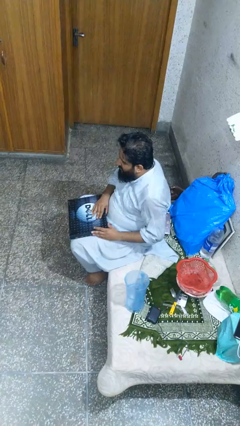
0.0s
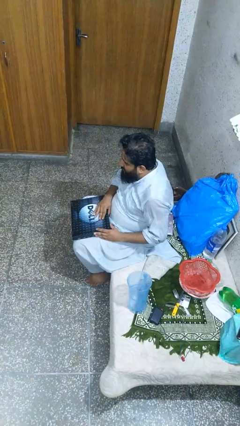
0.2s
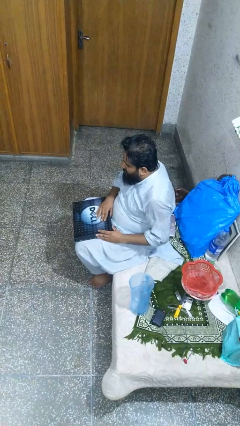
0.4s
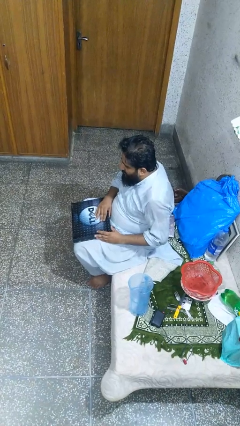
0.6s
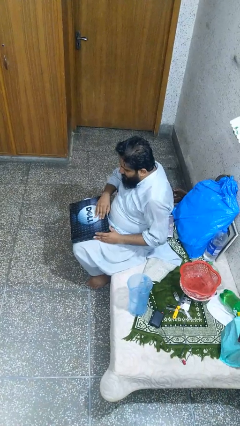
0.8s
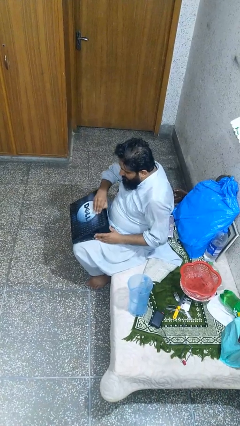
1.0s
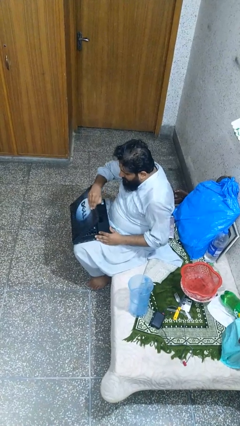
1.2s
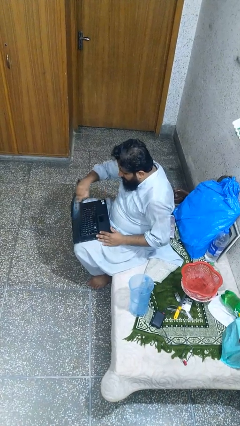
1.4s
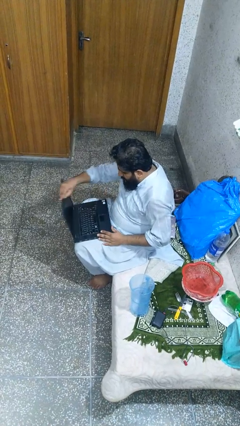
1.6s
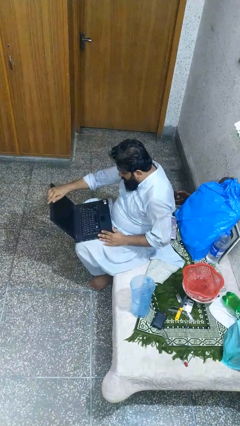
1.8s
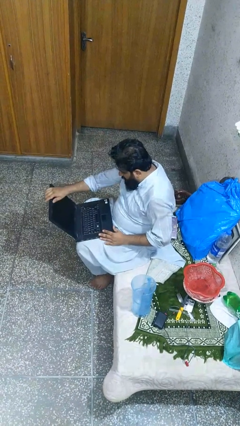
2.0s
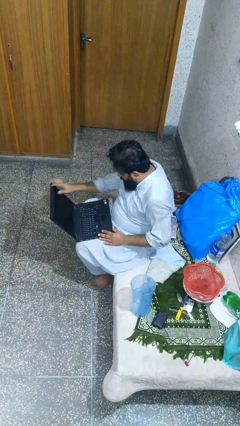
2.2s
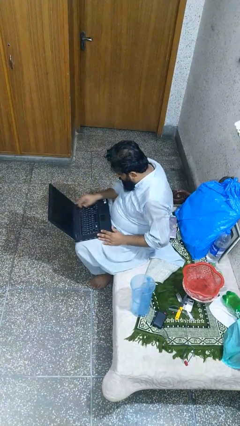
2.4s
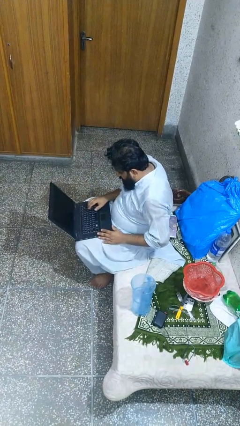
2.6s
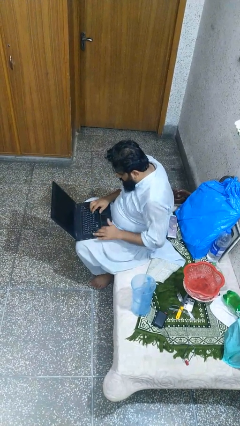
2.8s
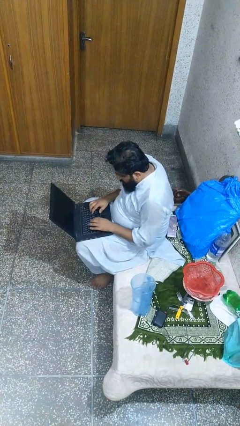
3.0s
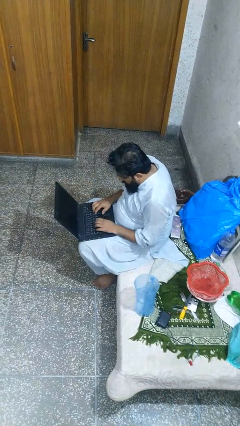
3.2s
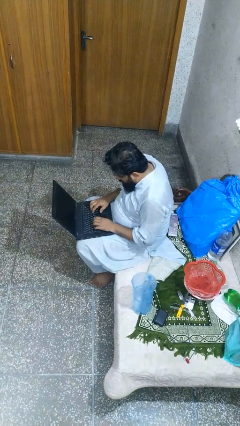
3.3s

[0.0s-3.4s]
person opens laptop

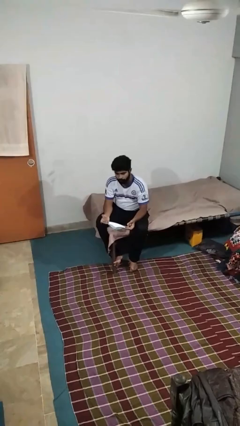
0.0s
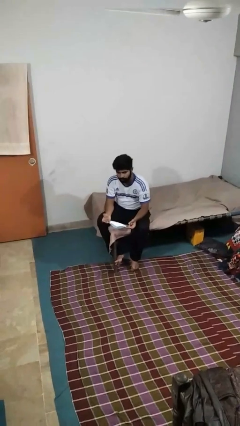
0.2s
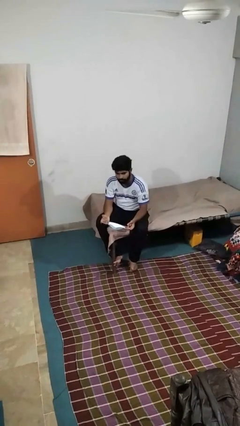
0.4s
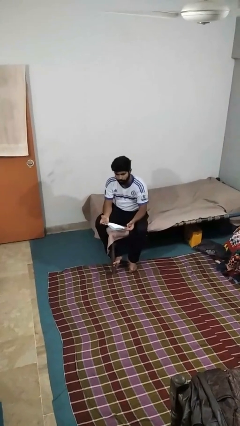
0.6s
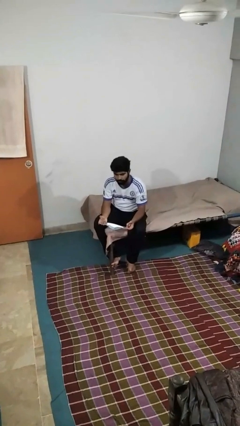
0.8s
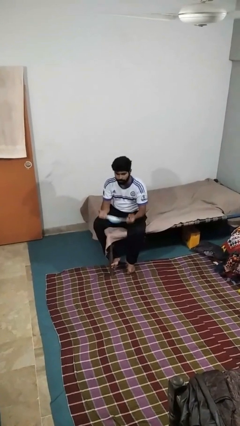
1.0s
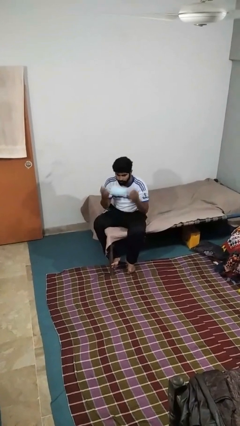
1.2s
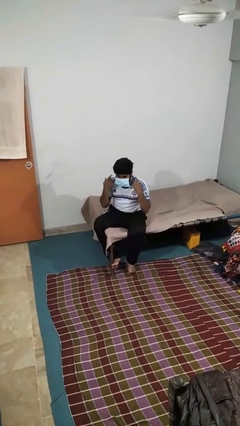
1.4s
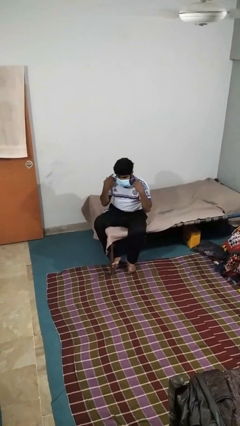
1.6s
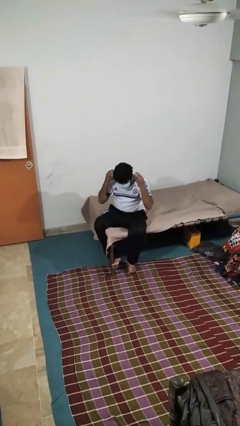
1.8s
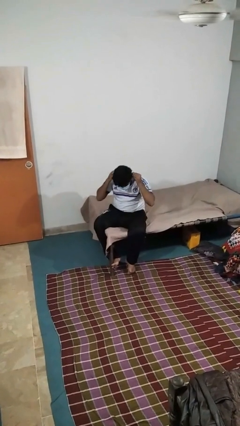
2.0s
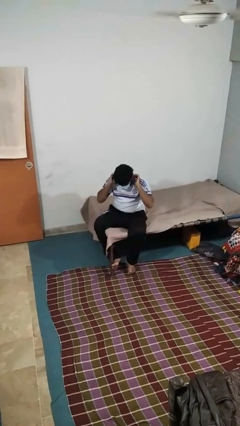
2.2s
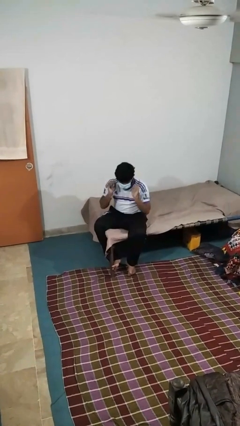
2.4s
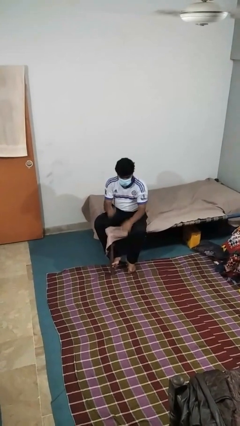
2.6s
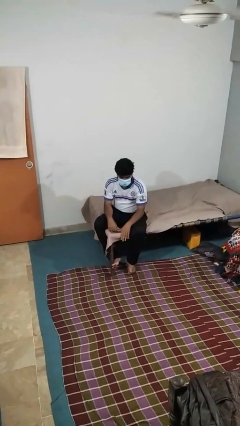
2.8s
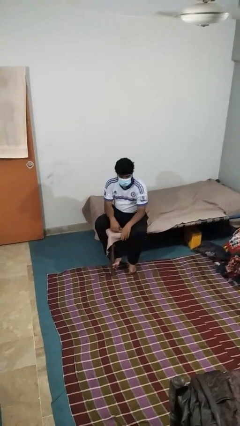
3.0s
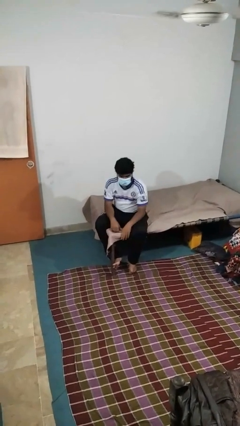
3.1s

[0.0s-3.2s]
person puts on facemask

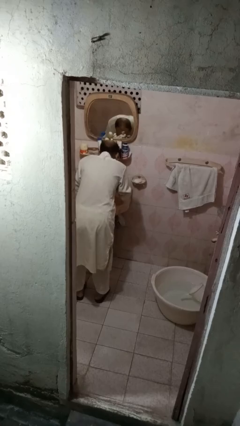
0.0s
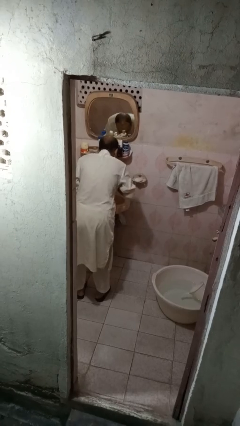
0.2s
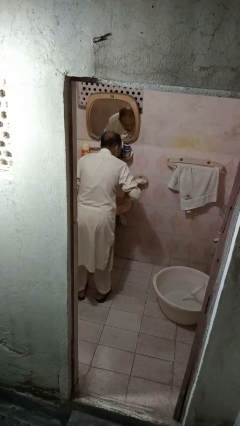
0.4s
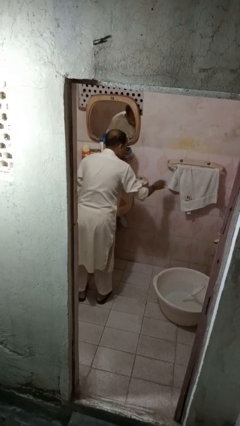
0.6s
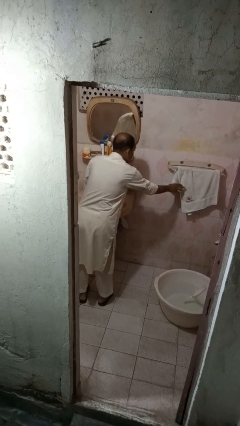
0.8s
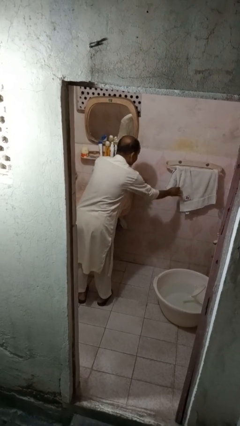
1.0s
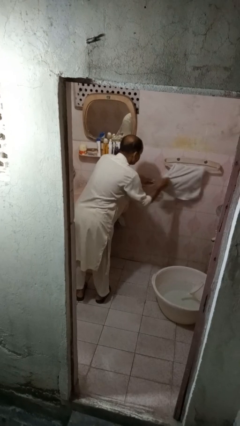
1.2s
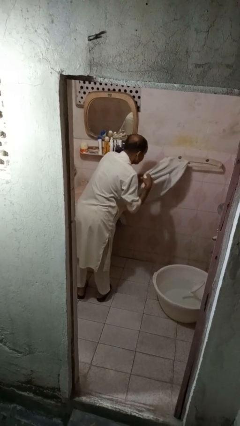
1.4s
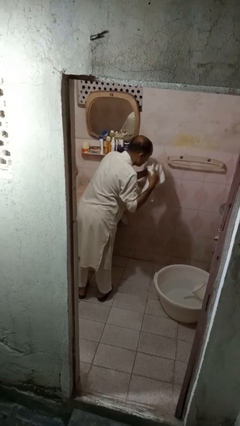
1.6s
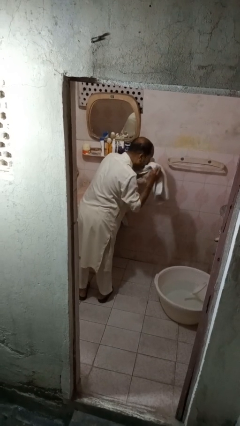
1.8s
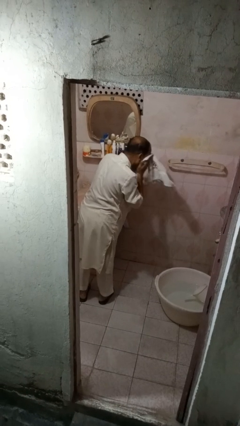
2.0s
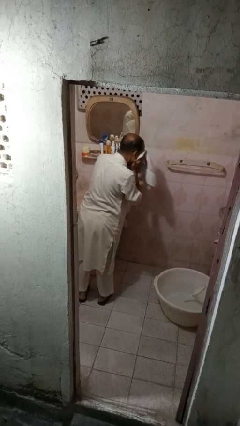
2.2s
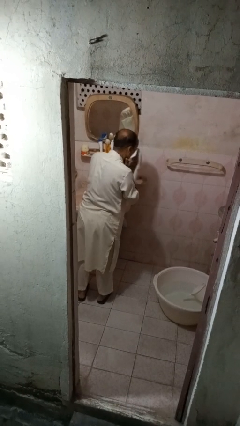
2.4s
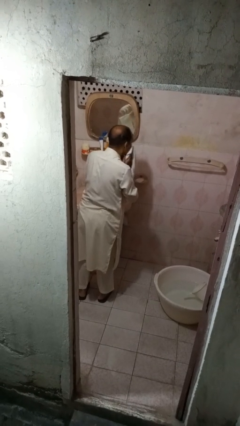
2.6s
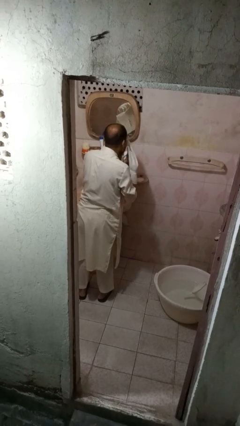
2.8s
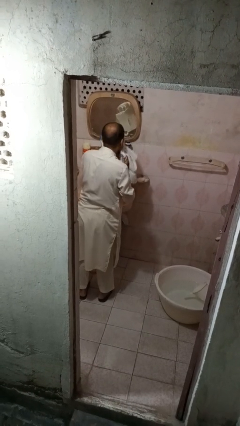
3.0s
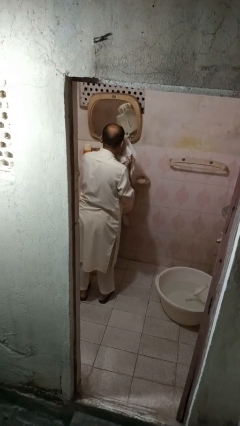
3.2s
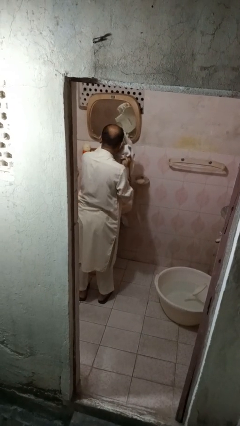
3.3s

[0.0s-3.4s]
person dries face with towel

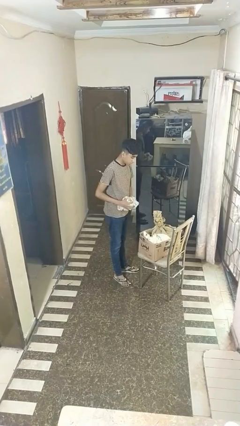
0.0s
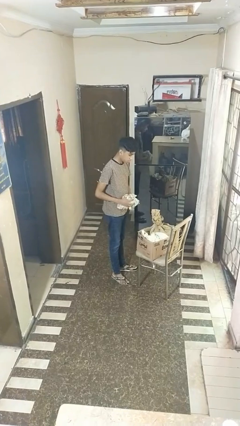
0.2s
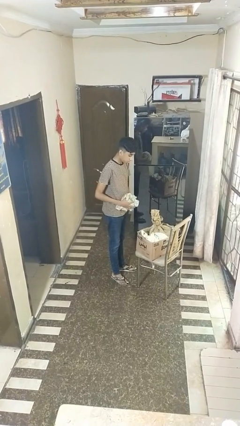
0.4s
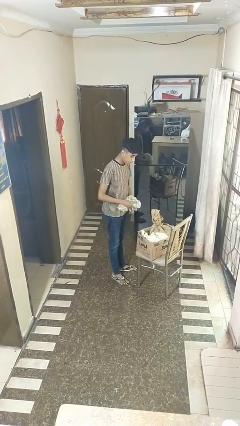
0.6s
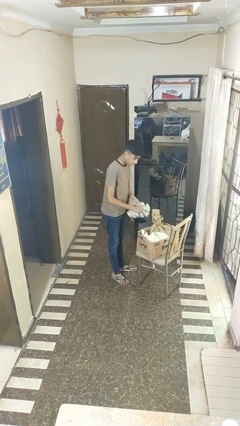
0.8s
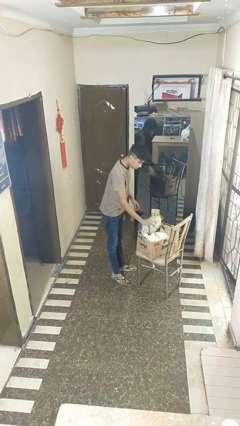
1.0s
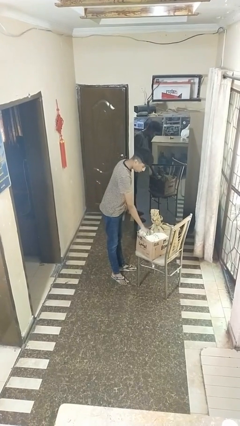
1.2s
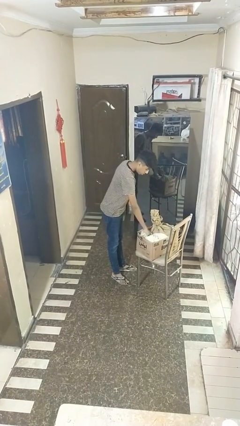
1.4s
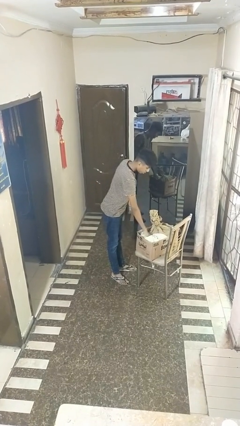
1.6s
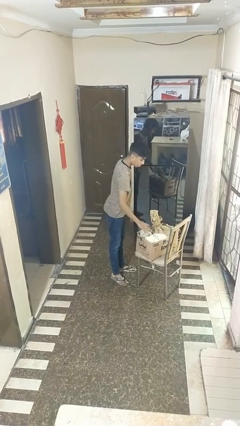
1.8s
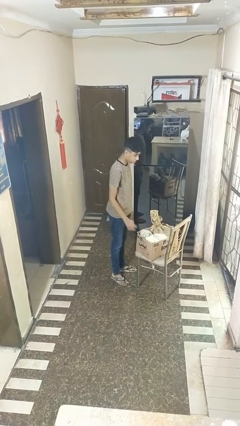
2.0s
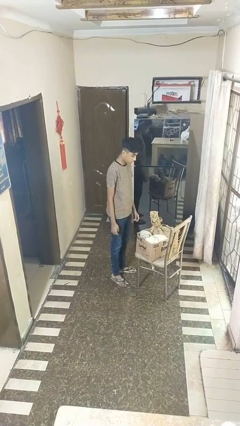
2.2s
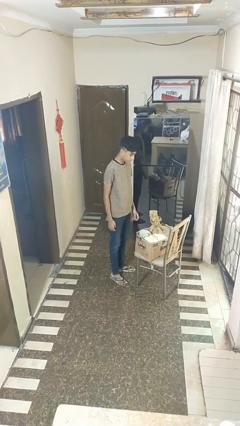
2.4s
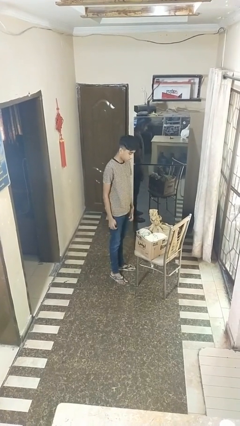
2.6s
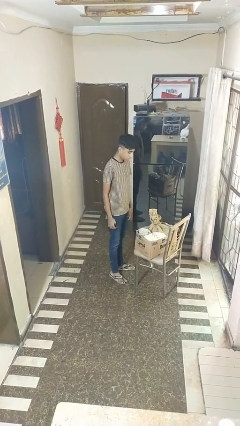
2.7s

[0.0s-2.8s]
person puts object into box

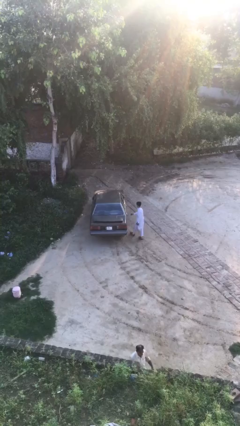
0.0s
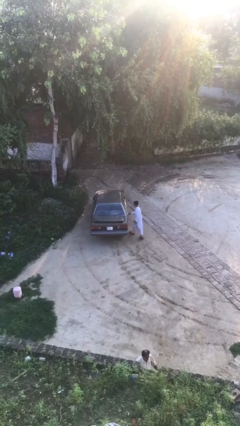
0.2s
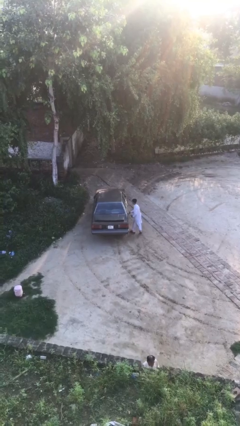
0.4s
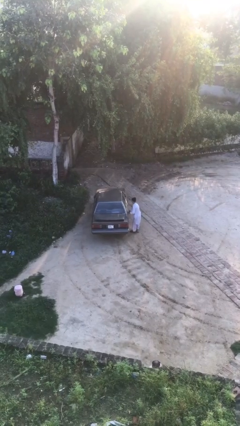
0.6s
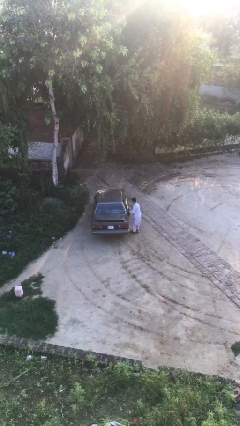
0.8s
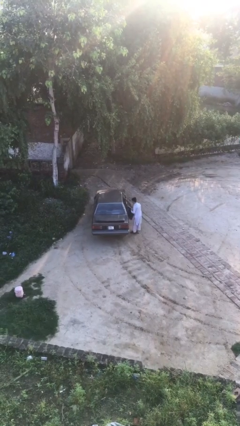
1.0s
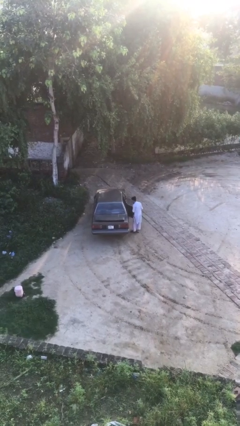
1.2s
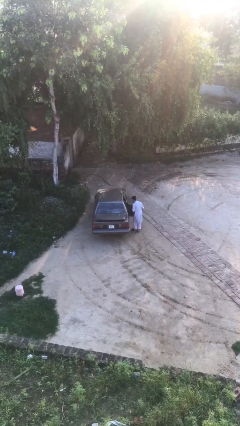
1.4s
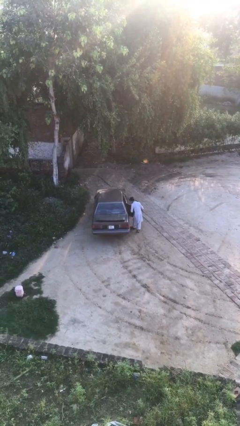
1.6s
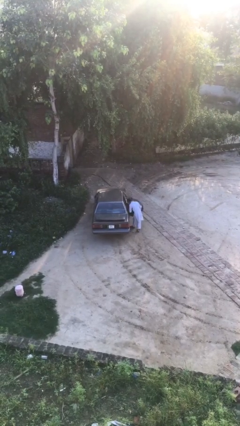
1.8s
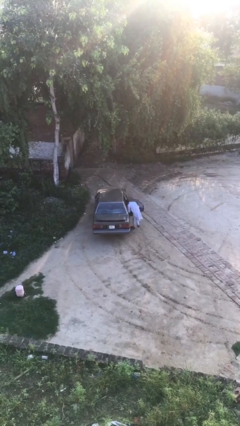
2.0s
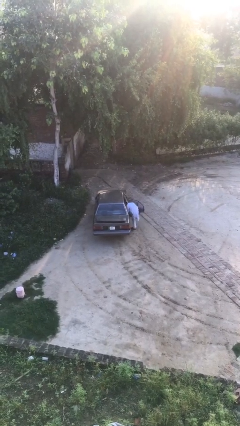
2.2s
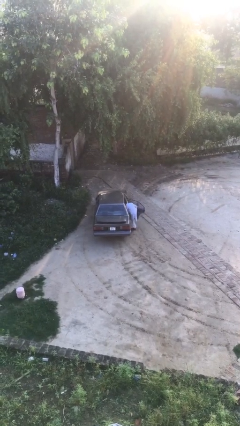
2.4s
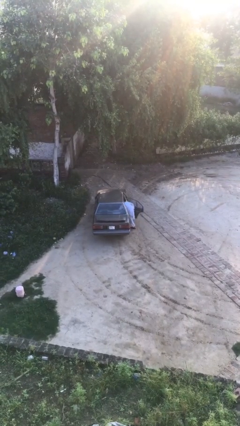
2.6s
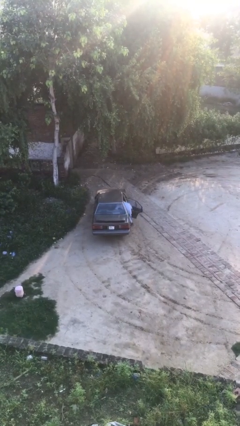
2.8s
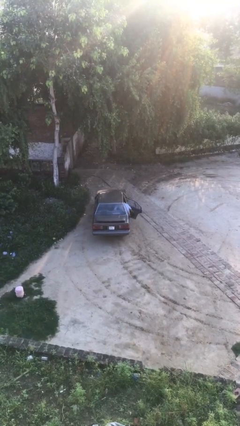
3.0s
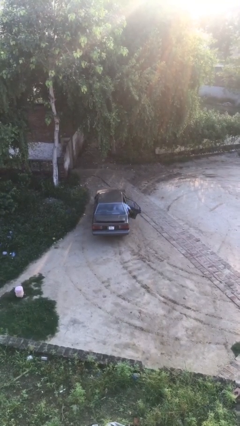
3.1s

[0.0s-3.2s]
car picks up person

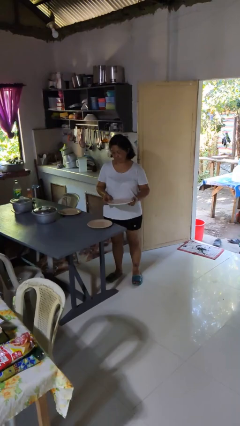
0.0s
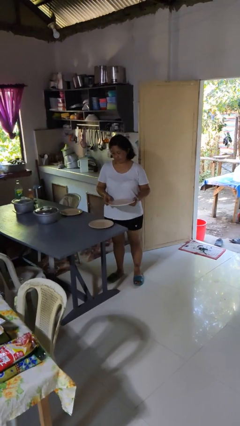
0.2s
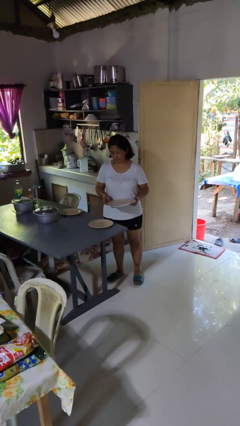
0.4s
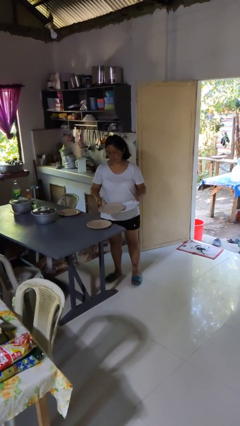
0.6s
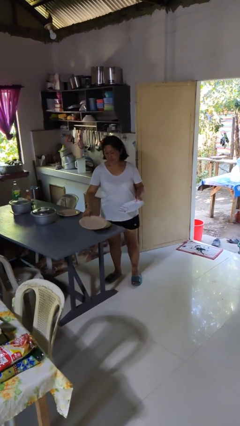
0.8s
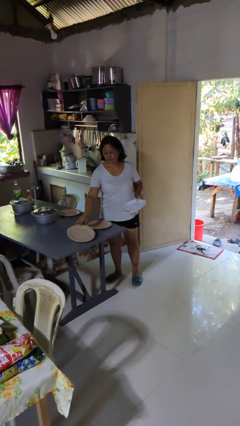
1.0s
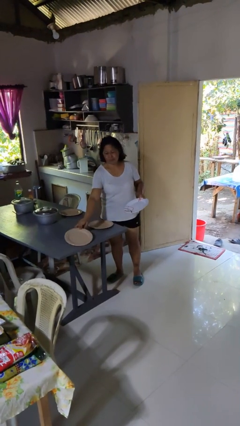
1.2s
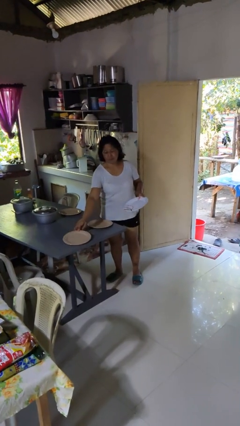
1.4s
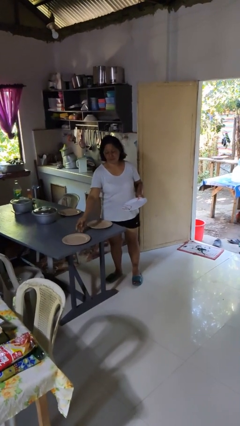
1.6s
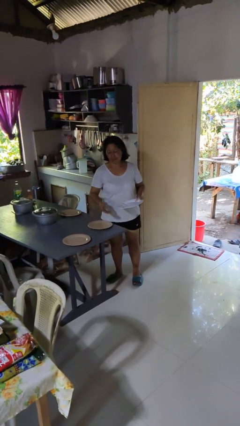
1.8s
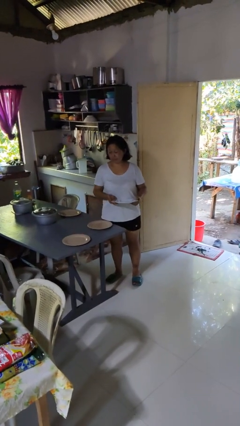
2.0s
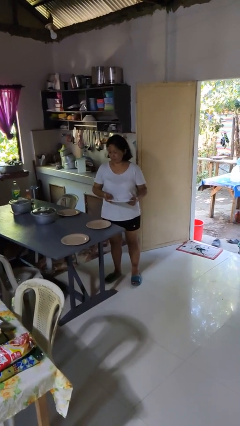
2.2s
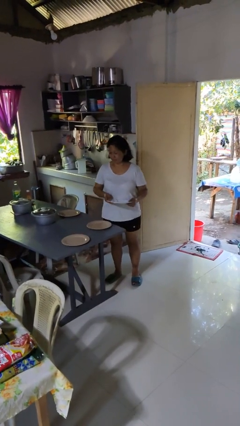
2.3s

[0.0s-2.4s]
person sets table
